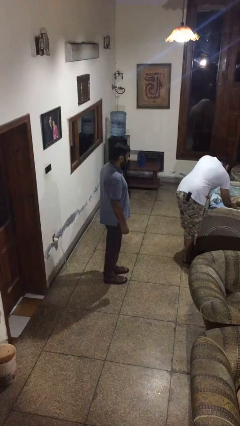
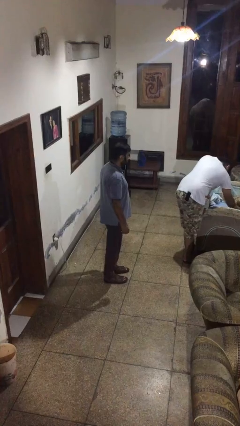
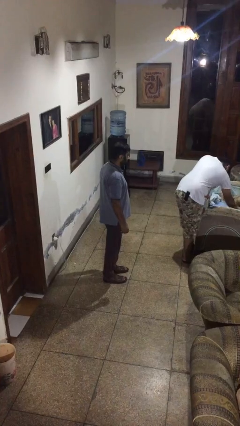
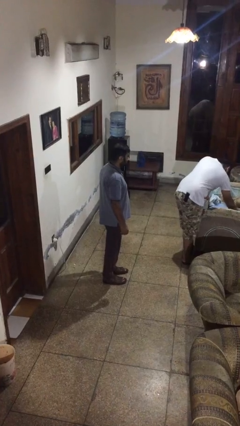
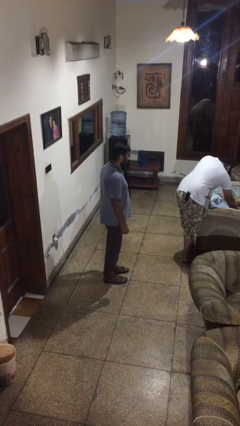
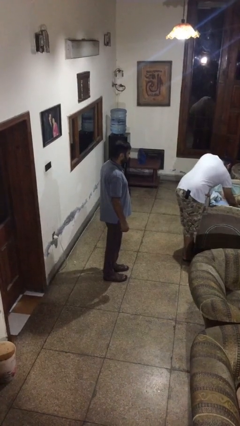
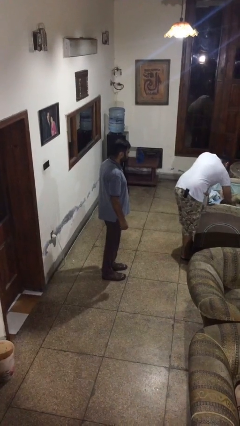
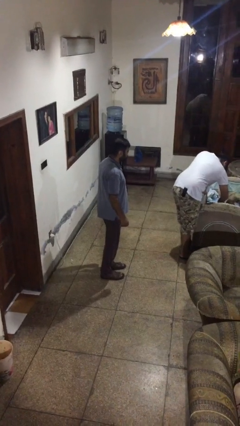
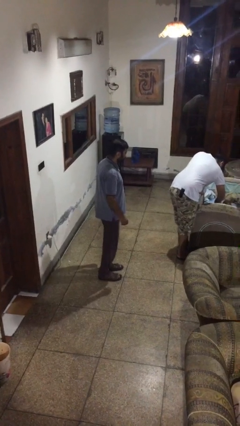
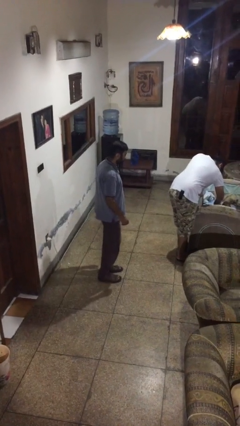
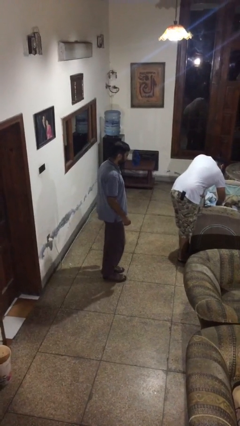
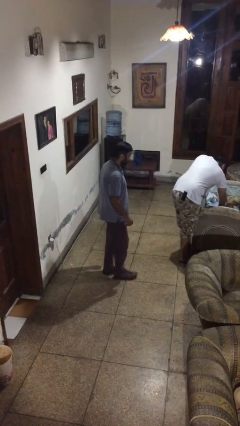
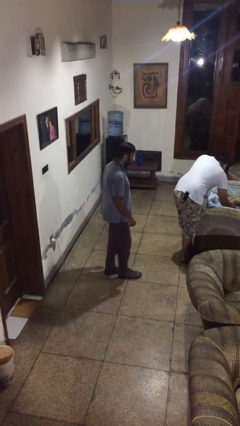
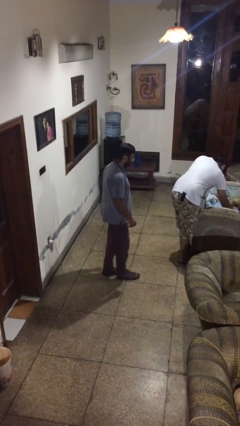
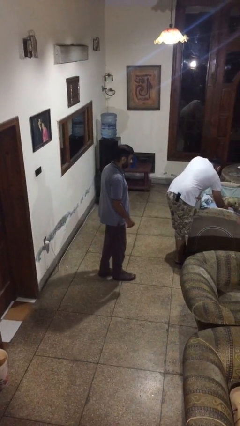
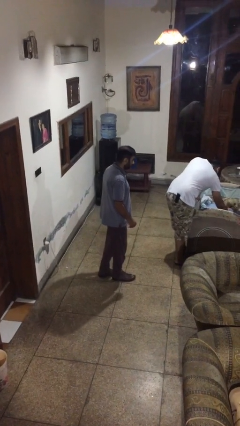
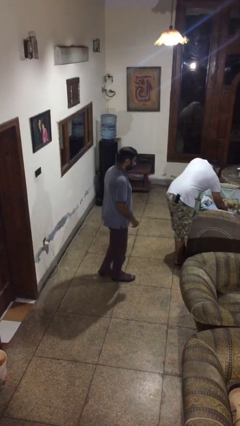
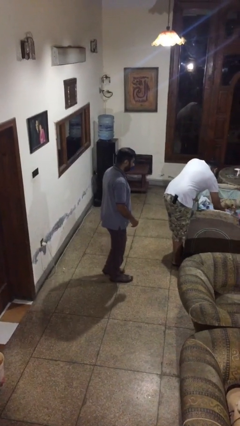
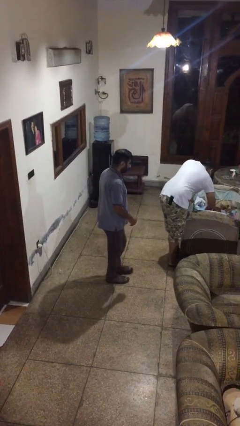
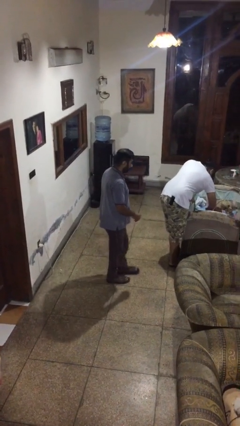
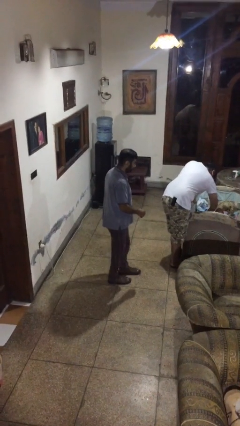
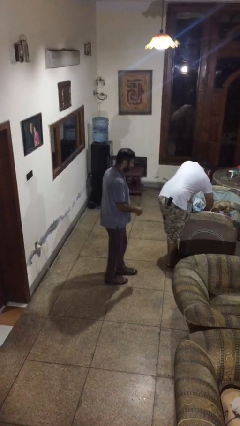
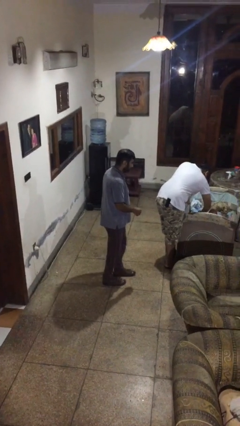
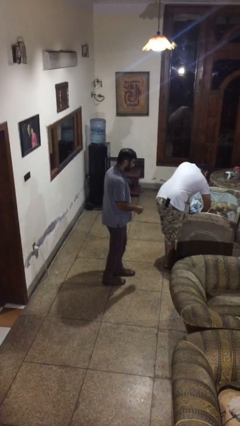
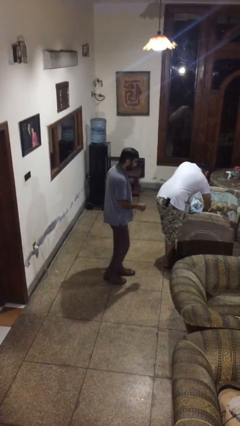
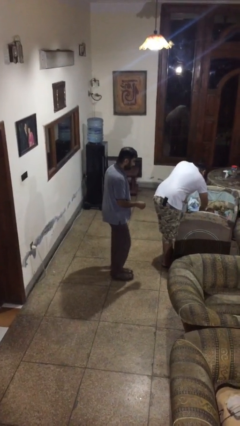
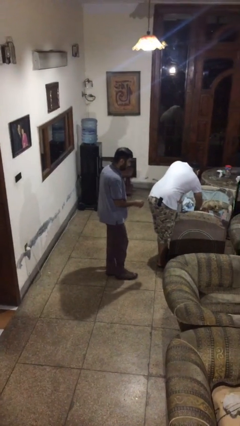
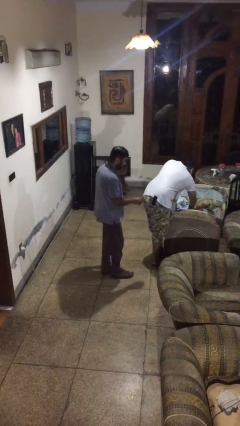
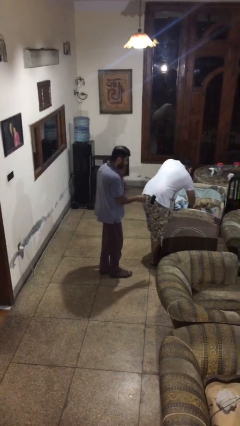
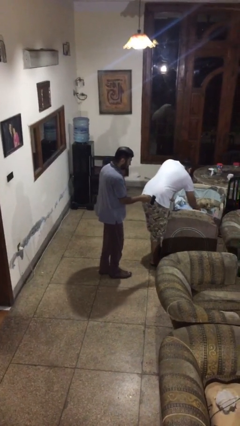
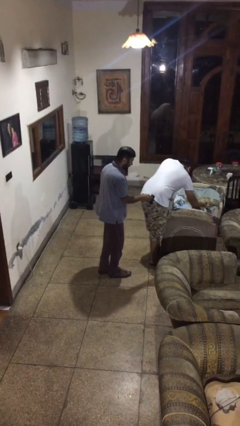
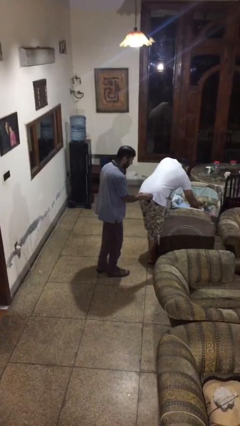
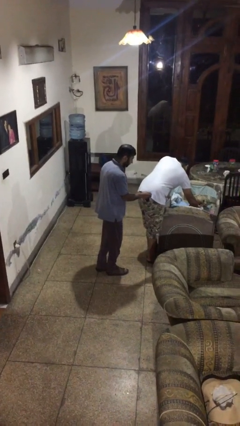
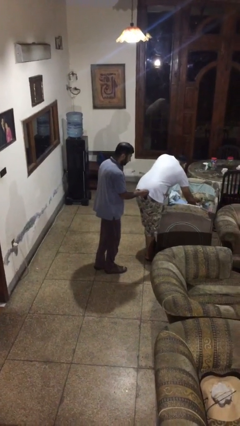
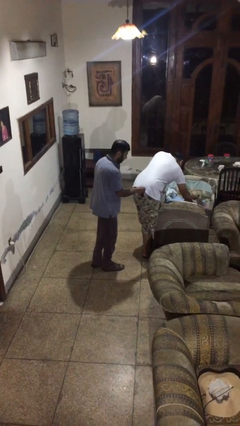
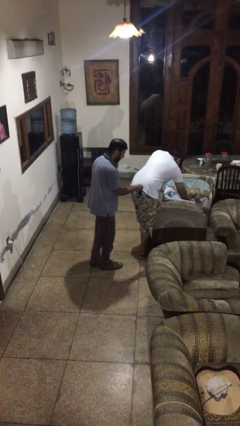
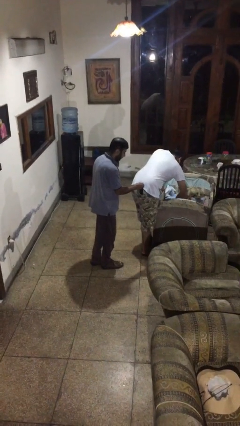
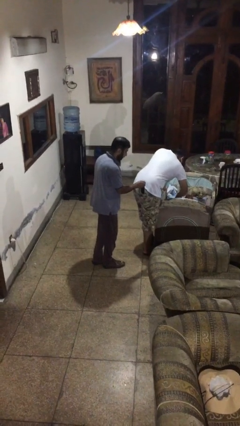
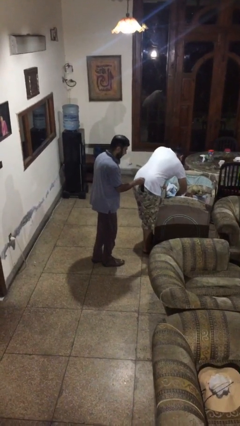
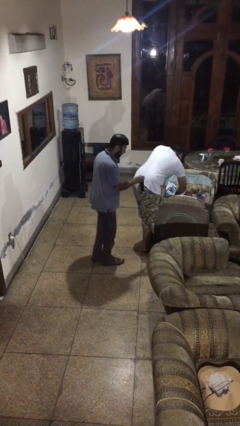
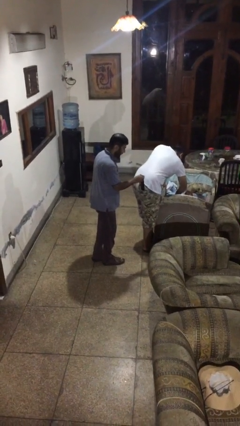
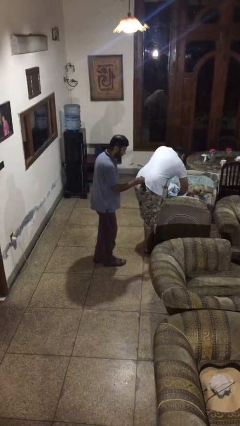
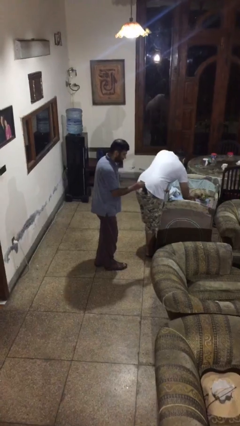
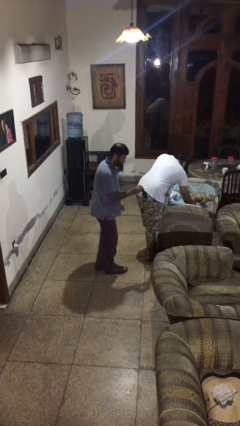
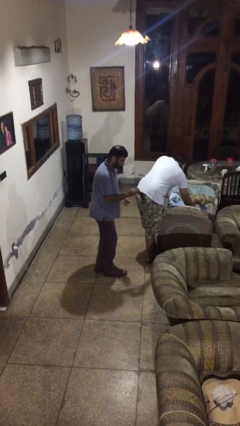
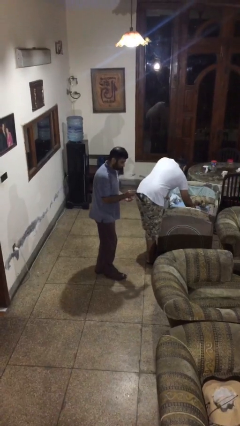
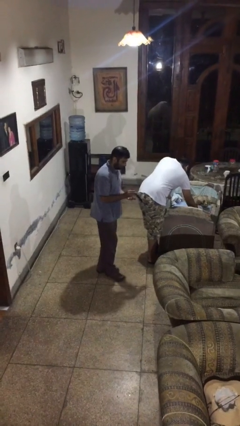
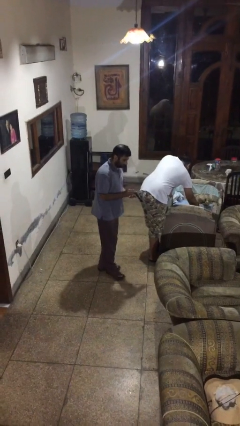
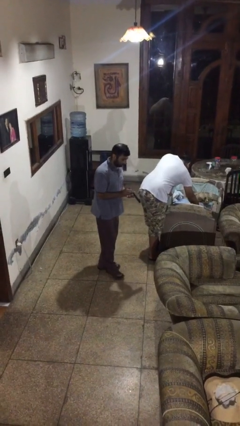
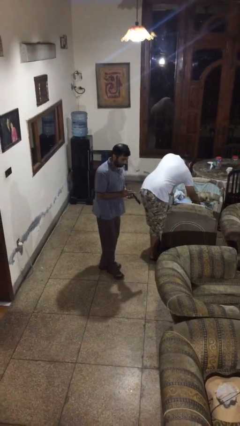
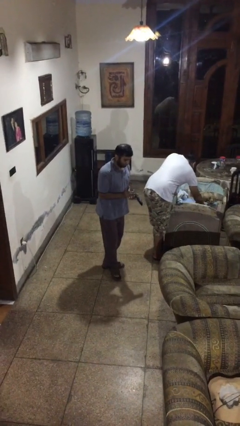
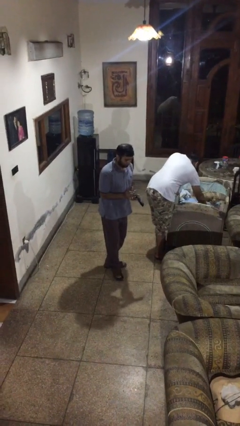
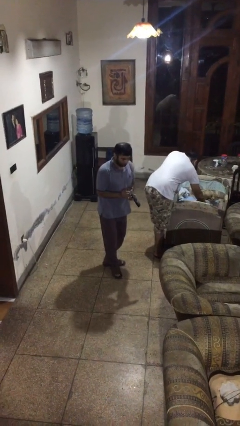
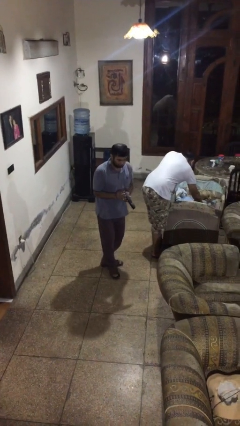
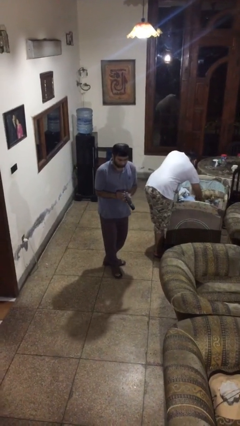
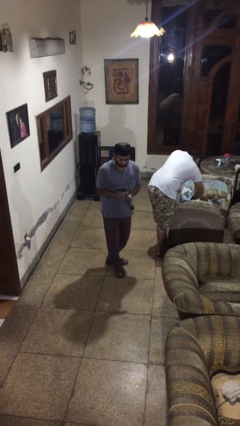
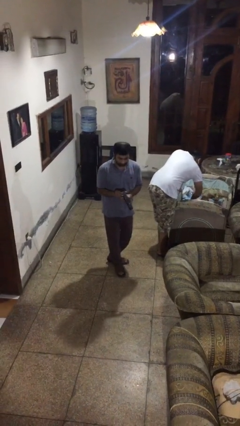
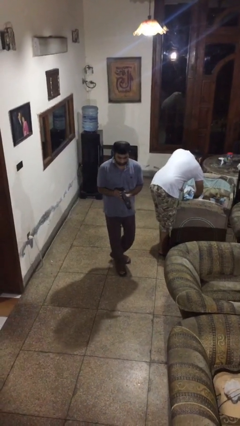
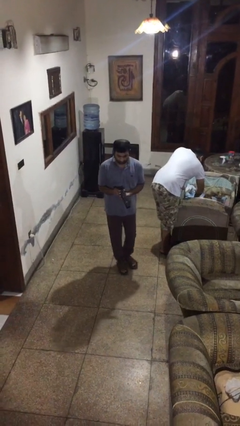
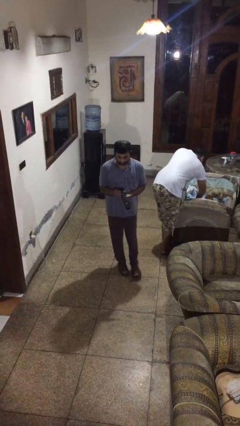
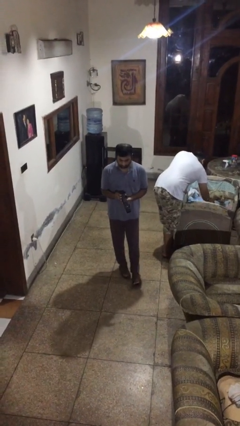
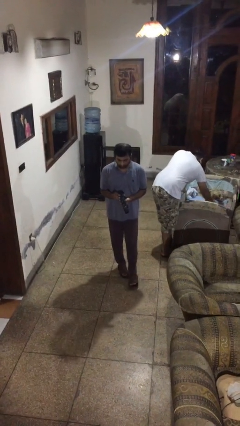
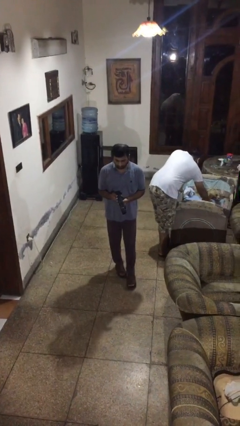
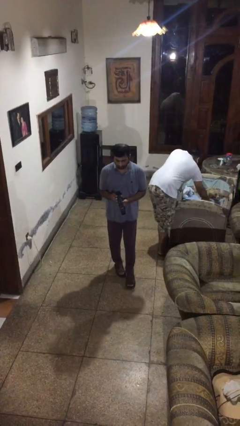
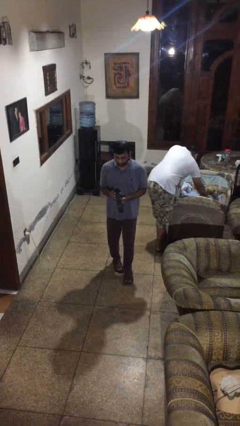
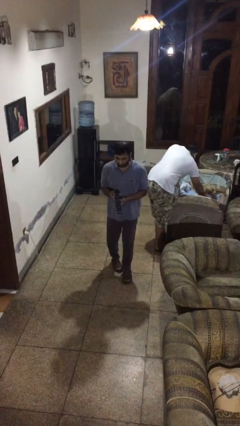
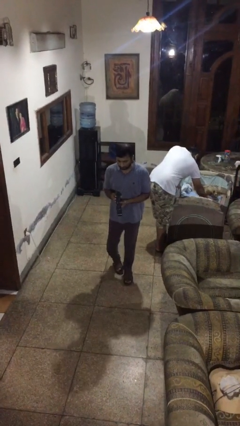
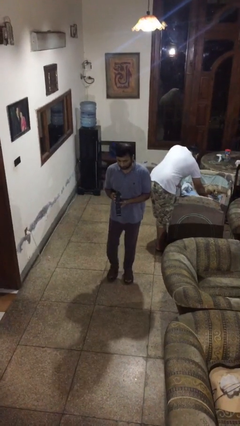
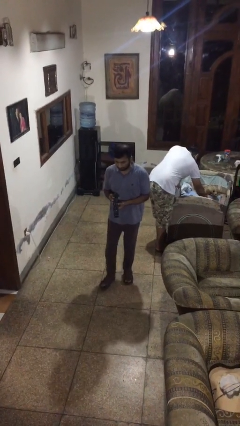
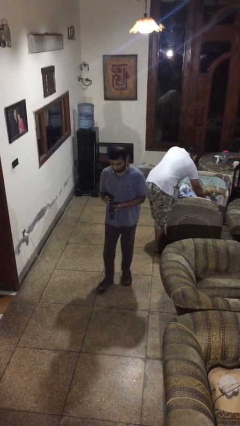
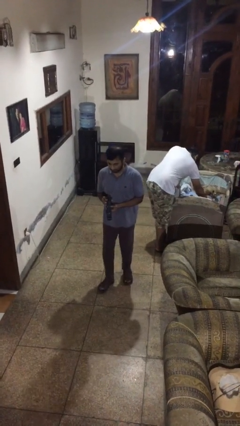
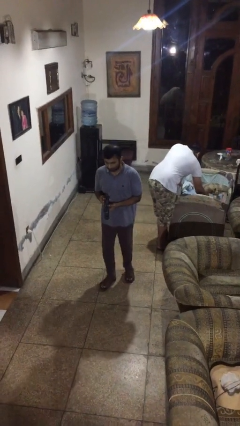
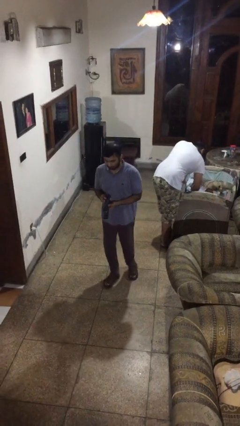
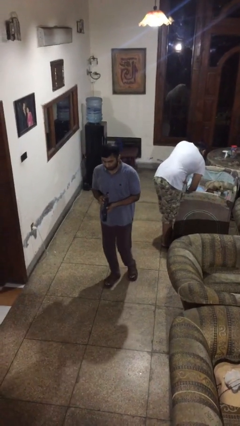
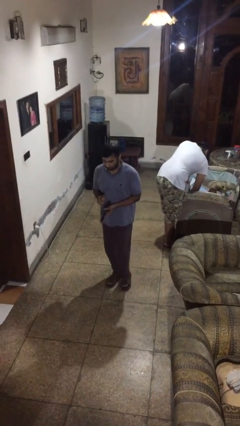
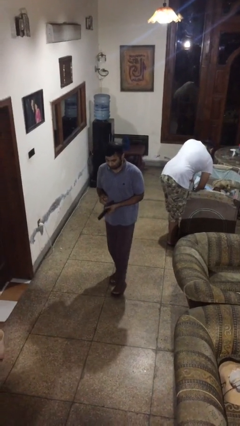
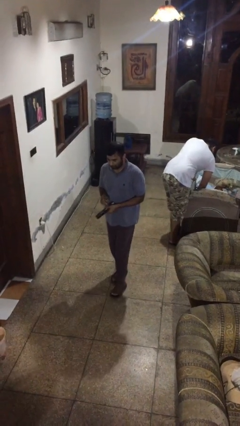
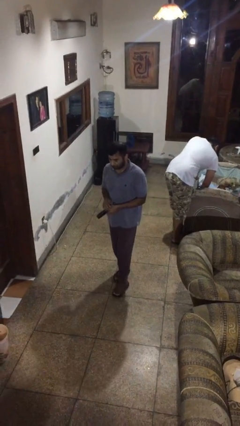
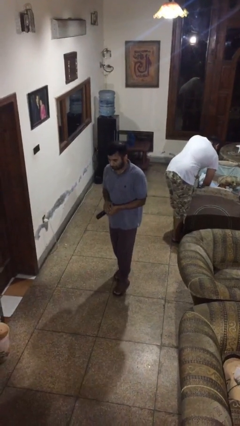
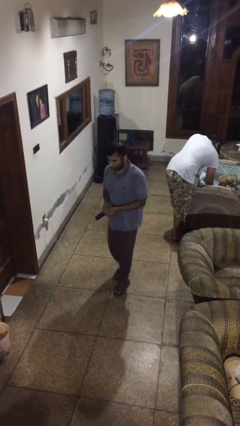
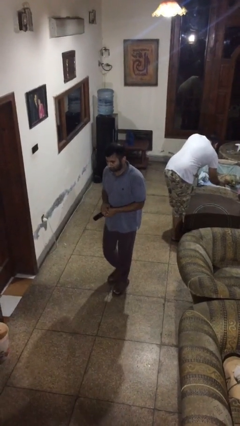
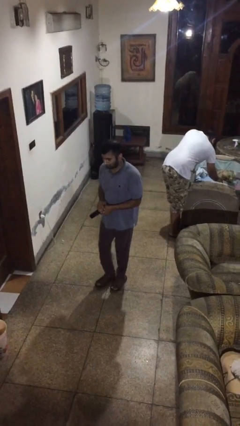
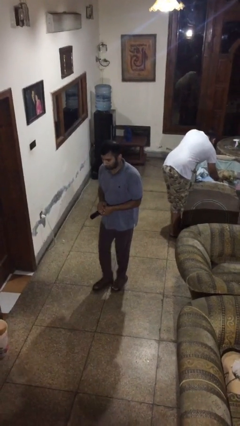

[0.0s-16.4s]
person steals object from person

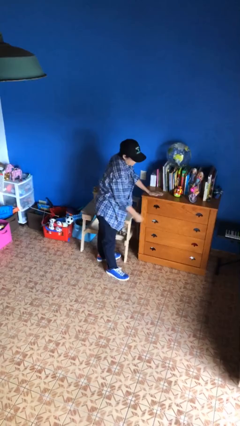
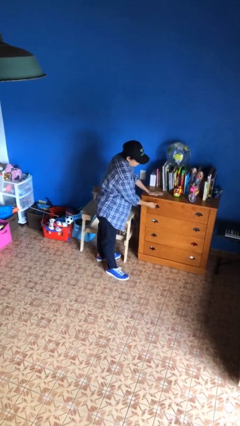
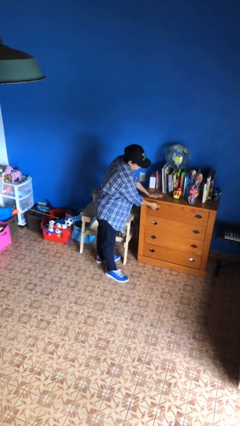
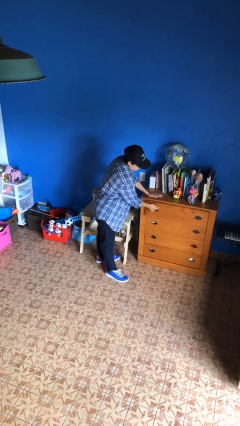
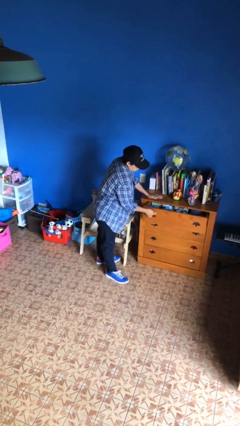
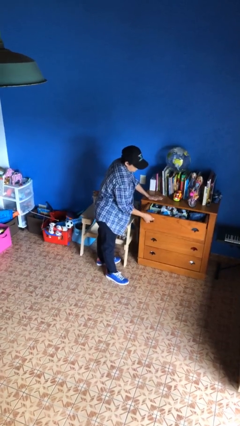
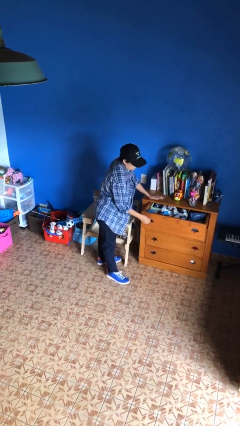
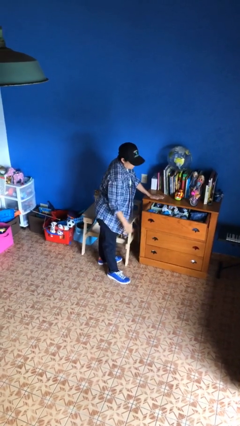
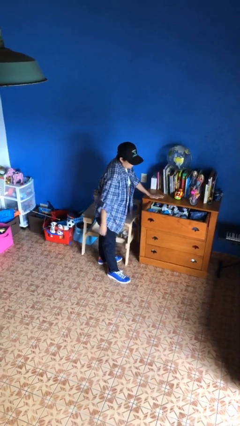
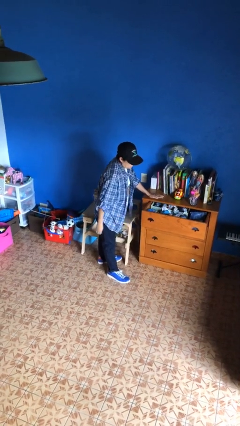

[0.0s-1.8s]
person opens dresser drawer
